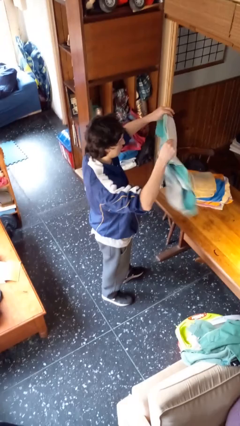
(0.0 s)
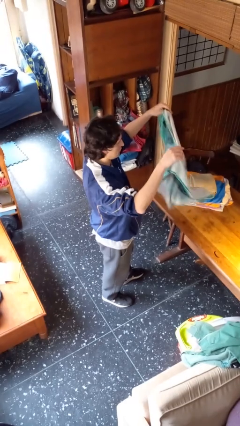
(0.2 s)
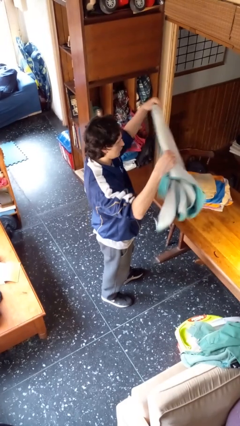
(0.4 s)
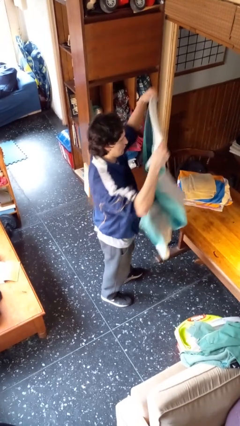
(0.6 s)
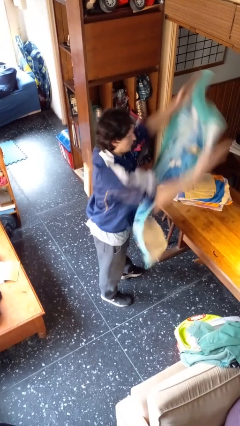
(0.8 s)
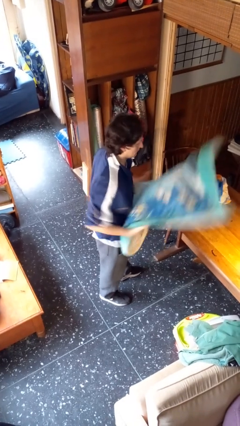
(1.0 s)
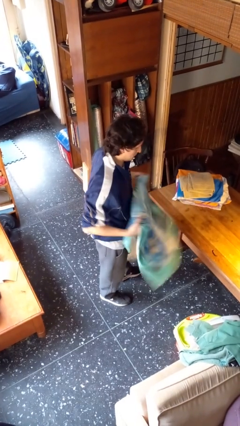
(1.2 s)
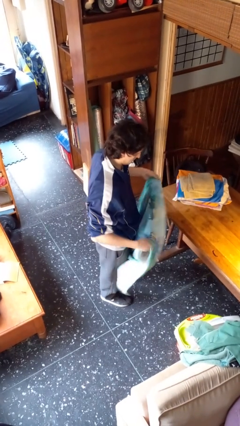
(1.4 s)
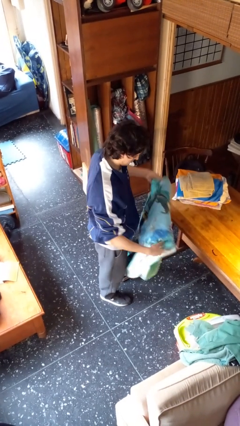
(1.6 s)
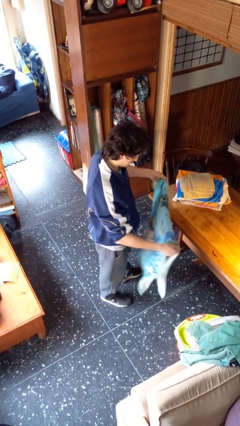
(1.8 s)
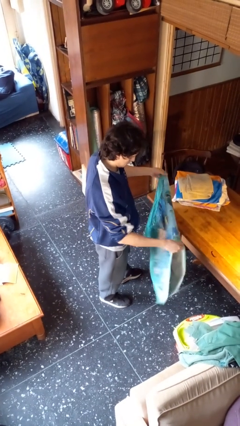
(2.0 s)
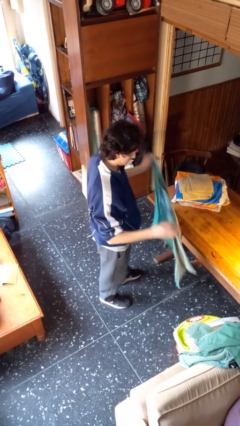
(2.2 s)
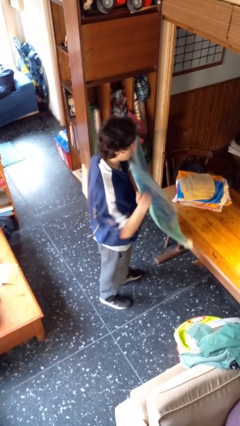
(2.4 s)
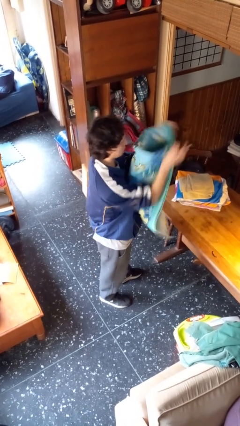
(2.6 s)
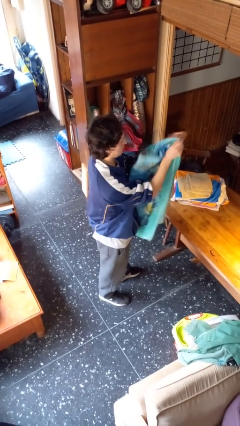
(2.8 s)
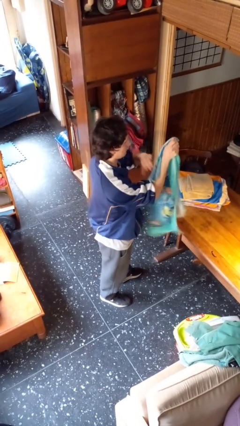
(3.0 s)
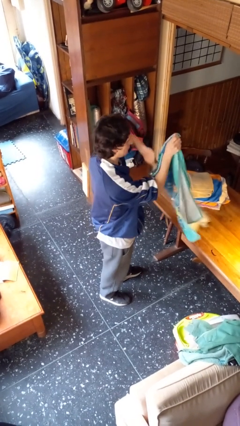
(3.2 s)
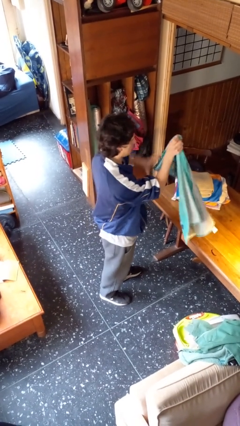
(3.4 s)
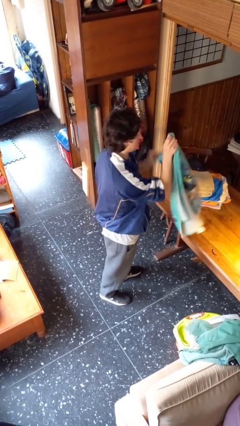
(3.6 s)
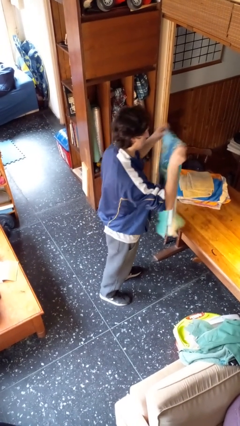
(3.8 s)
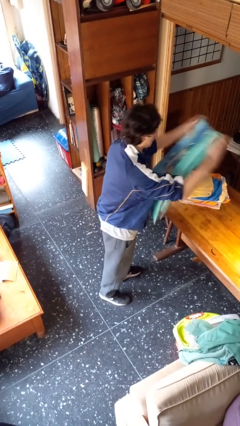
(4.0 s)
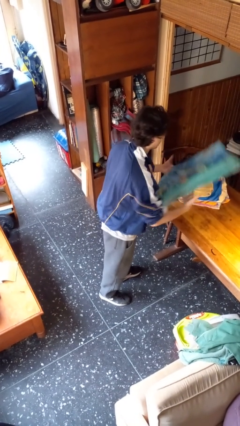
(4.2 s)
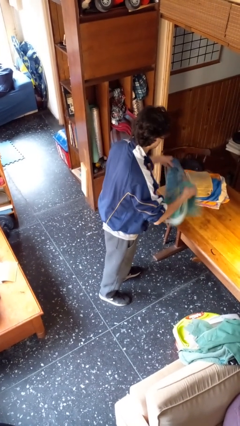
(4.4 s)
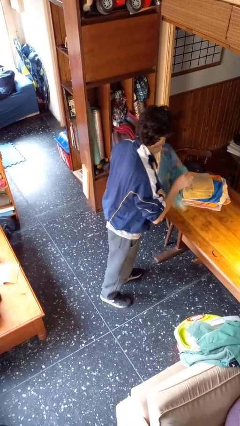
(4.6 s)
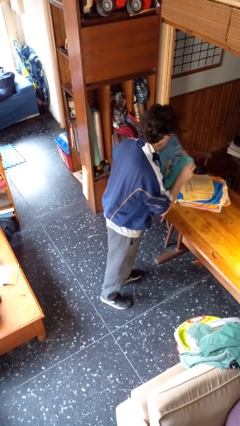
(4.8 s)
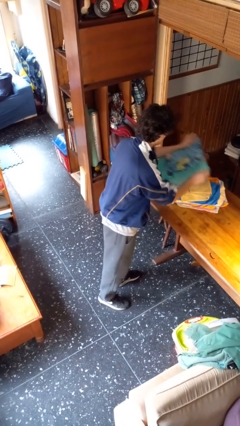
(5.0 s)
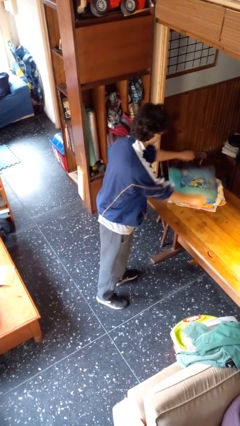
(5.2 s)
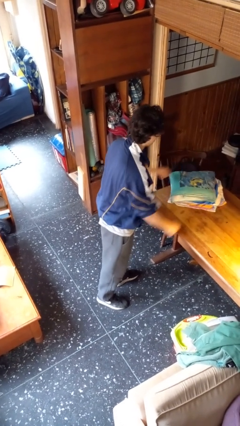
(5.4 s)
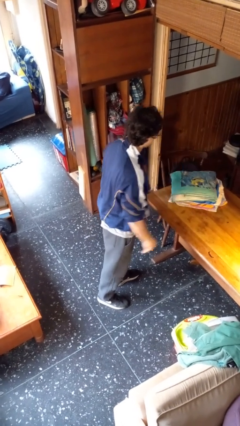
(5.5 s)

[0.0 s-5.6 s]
person folds towel

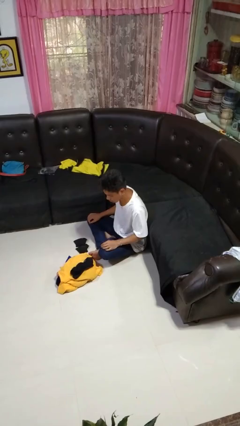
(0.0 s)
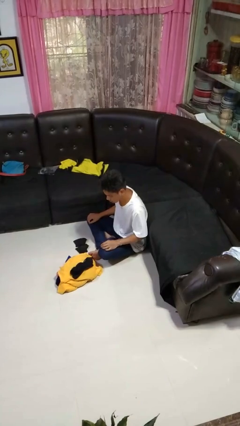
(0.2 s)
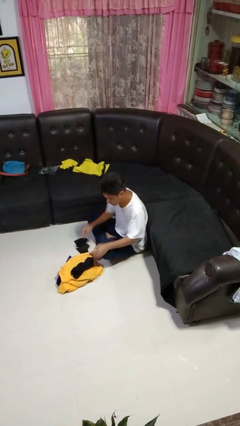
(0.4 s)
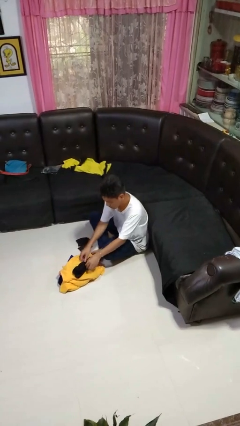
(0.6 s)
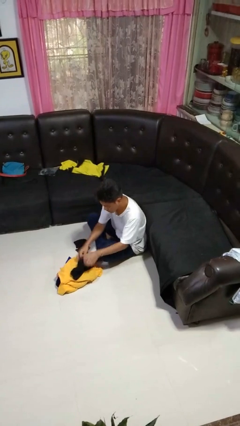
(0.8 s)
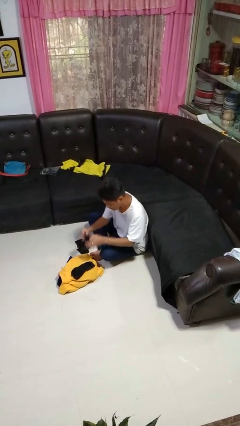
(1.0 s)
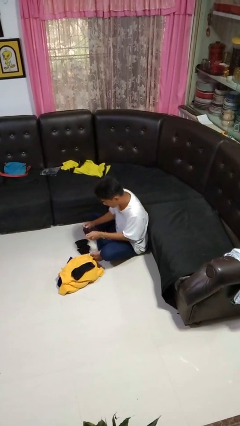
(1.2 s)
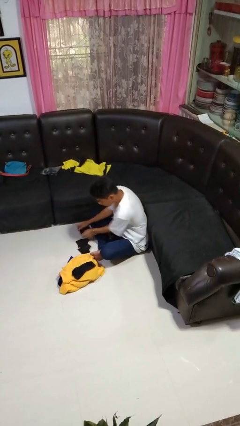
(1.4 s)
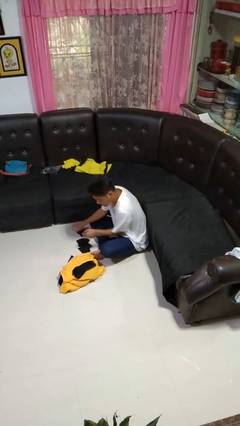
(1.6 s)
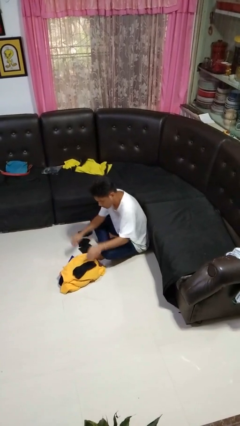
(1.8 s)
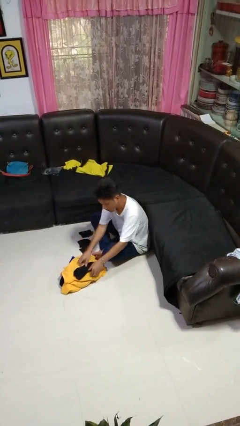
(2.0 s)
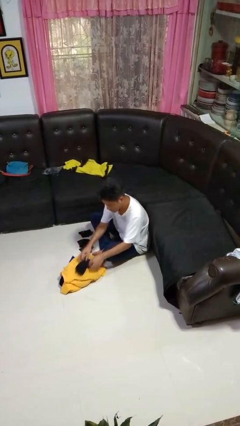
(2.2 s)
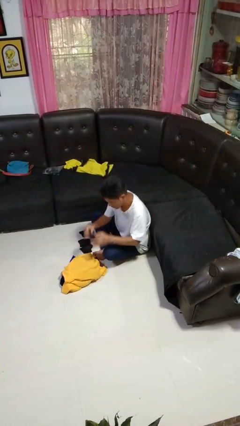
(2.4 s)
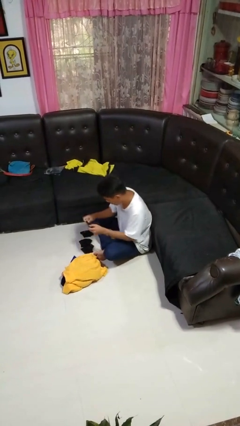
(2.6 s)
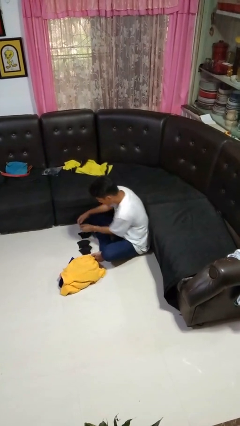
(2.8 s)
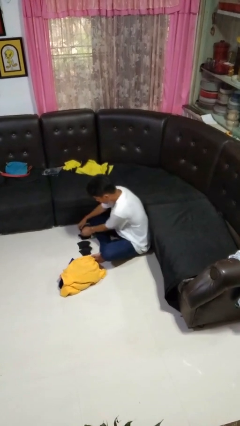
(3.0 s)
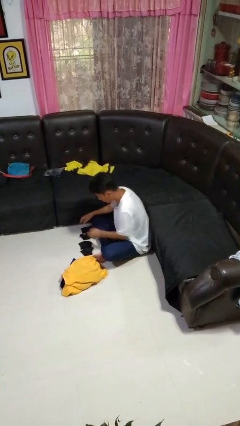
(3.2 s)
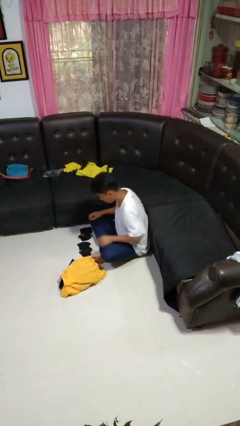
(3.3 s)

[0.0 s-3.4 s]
person folds socks

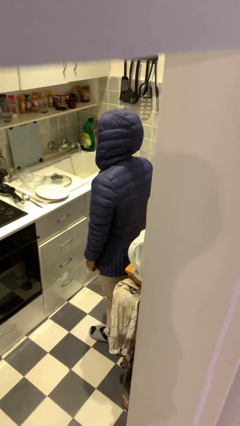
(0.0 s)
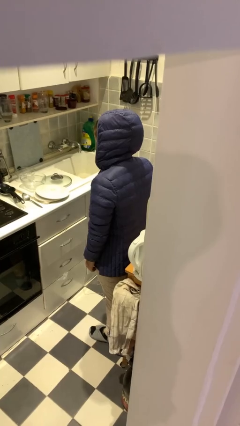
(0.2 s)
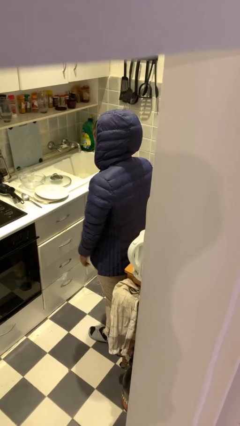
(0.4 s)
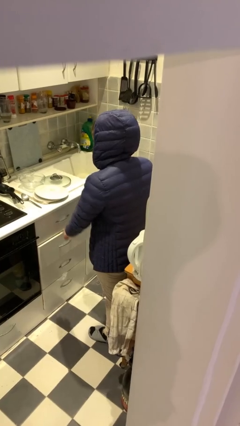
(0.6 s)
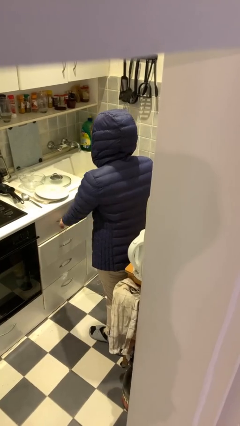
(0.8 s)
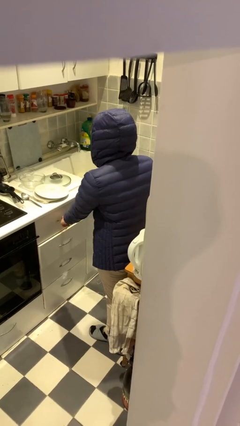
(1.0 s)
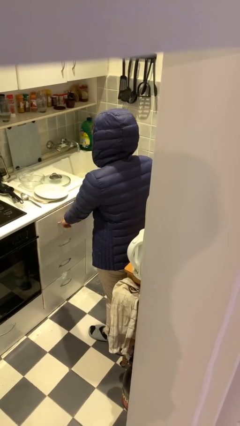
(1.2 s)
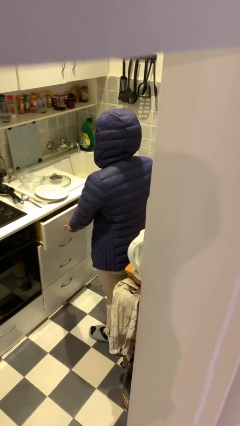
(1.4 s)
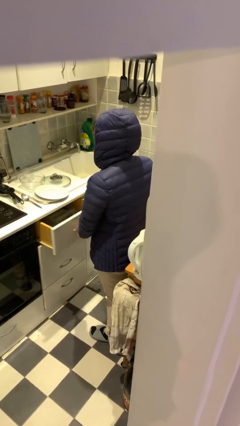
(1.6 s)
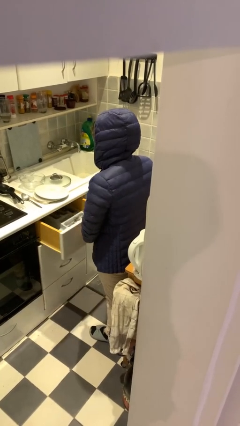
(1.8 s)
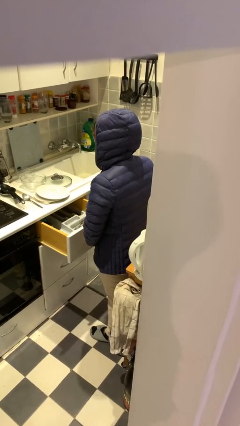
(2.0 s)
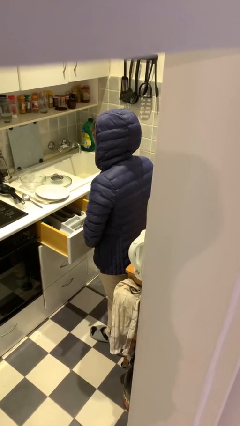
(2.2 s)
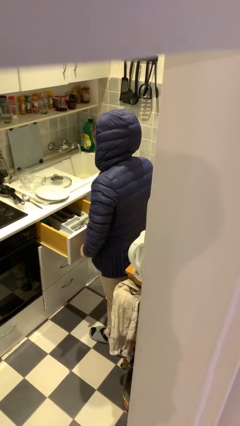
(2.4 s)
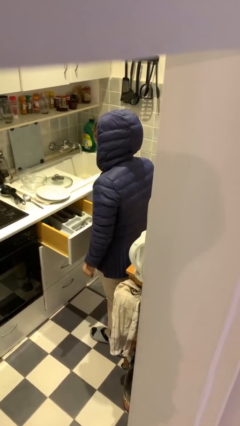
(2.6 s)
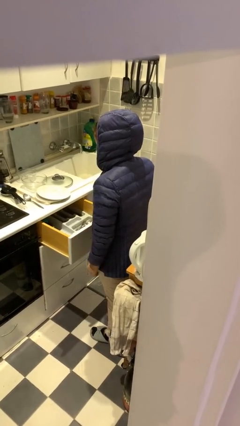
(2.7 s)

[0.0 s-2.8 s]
person opens kitchen drawer

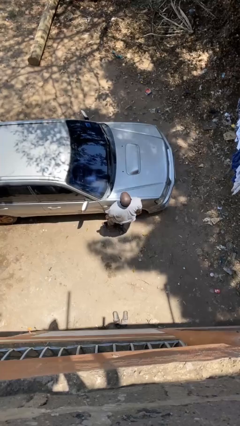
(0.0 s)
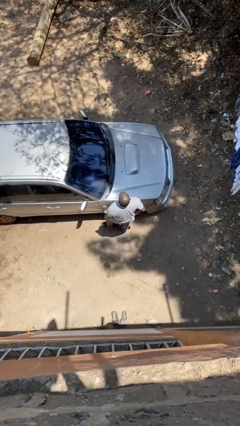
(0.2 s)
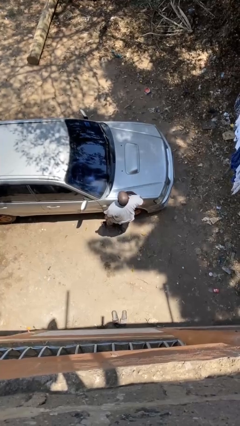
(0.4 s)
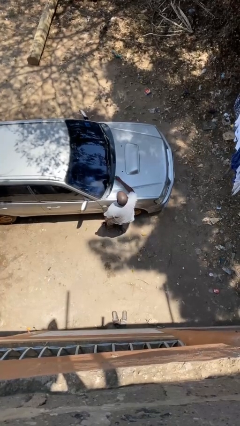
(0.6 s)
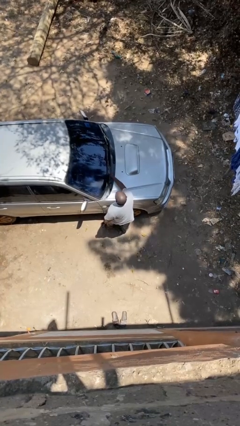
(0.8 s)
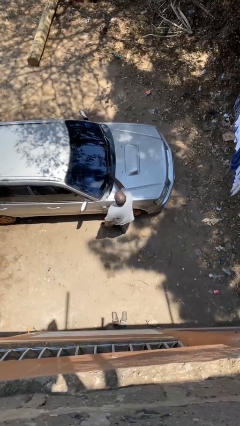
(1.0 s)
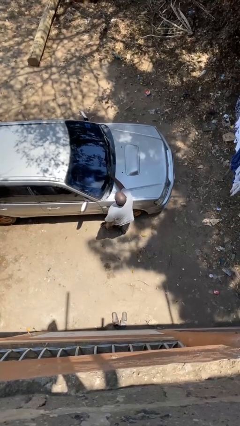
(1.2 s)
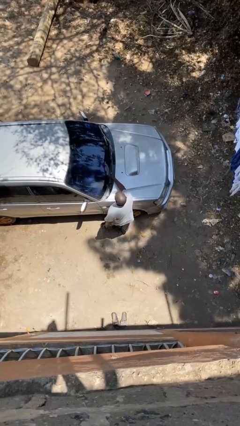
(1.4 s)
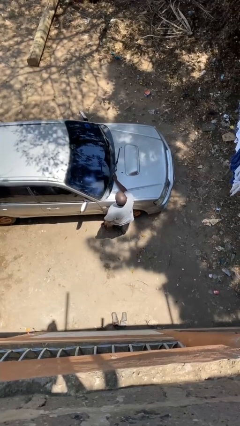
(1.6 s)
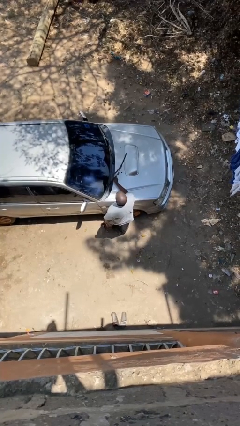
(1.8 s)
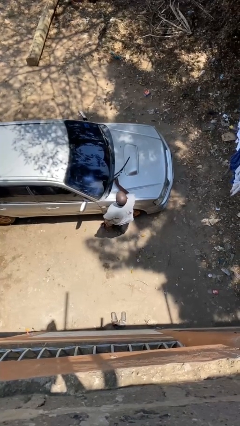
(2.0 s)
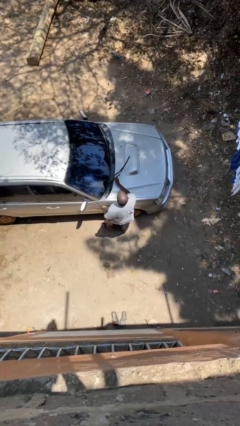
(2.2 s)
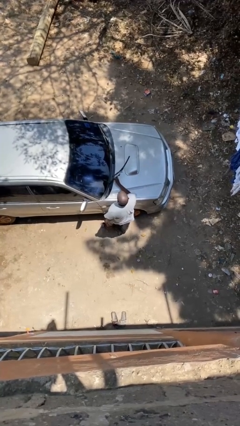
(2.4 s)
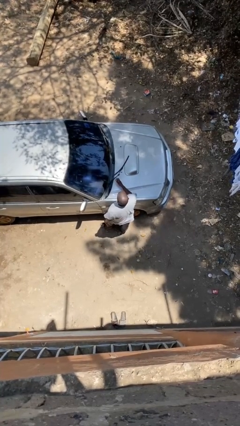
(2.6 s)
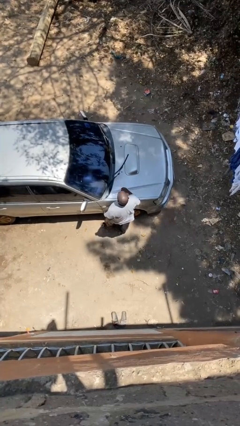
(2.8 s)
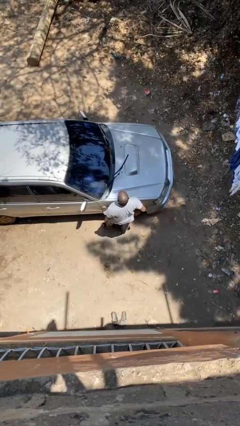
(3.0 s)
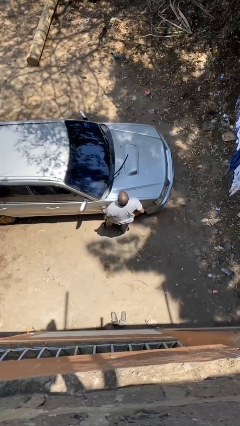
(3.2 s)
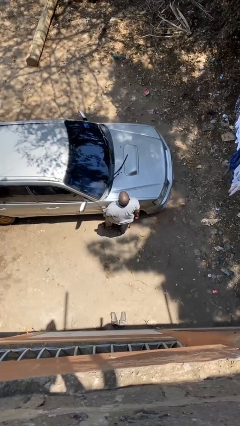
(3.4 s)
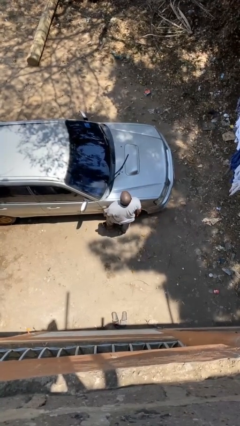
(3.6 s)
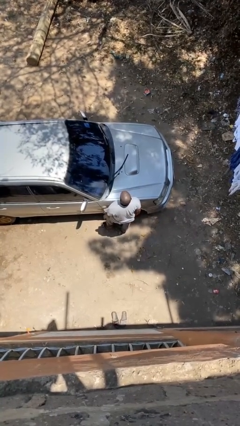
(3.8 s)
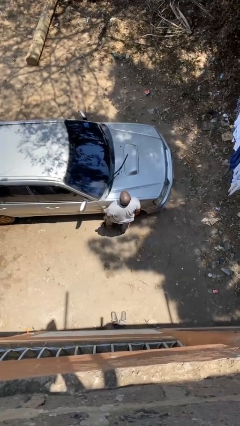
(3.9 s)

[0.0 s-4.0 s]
person flips up car wipers

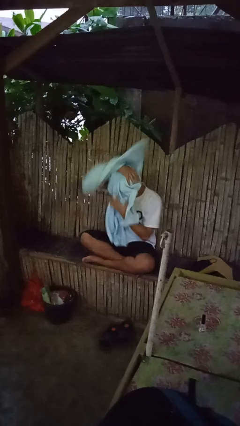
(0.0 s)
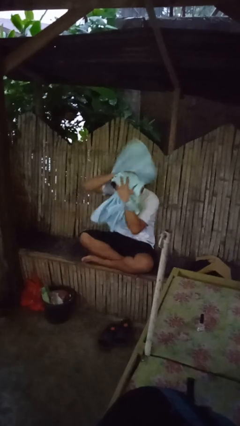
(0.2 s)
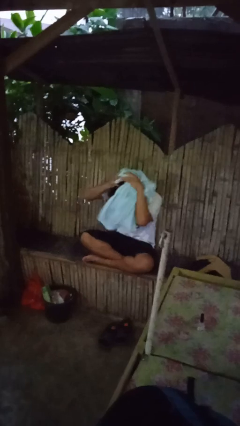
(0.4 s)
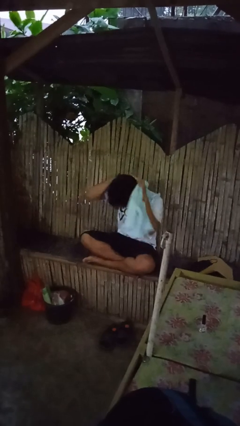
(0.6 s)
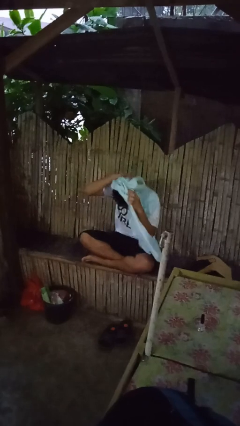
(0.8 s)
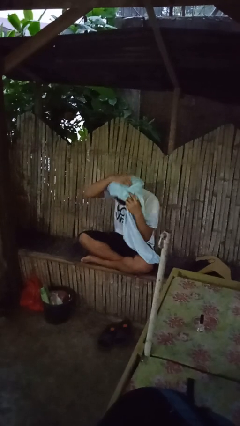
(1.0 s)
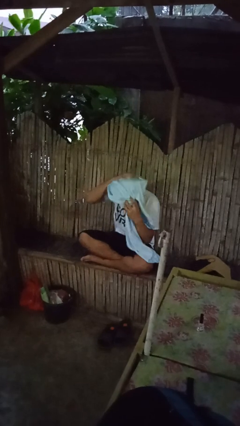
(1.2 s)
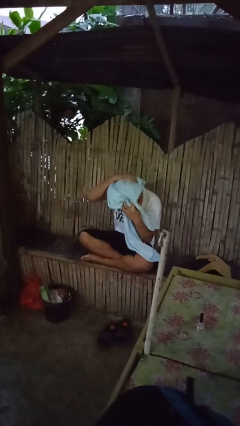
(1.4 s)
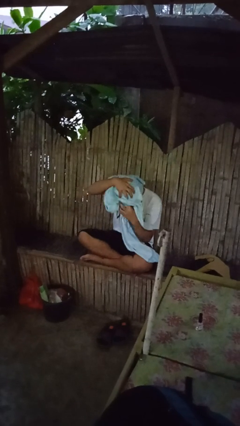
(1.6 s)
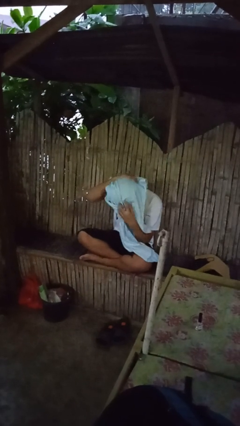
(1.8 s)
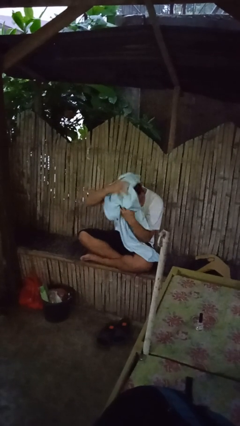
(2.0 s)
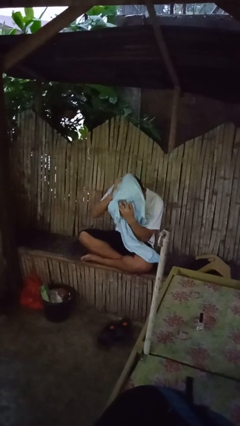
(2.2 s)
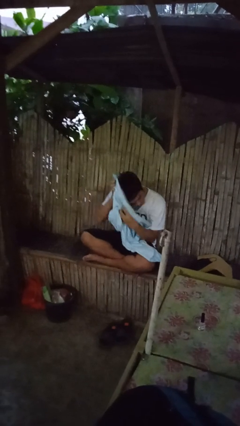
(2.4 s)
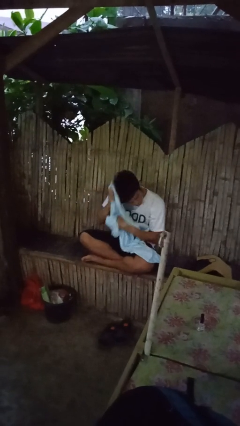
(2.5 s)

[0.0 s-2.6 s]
person dries hair with towel
